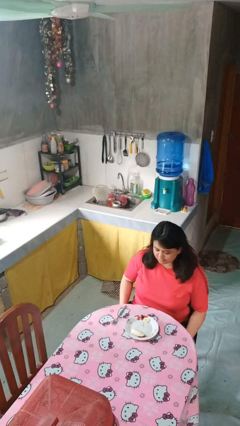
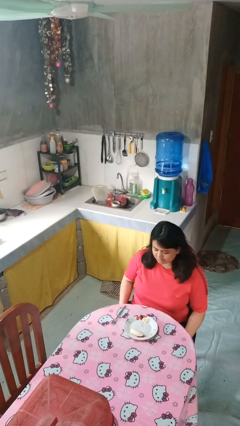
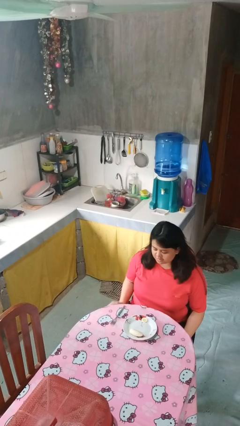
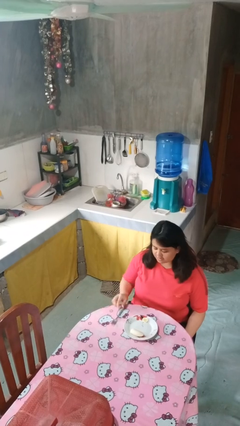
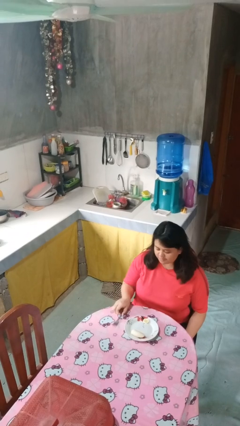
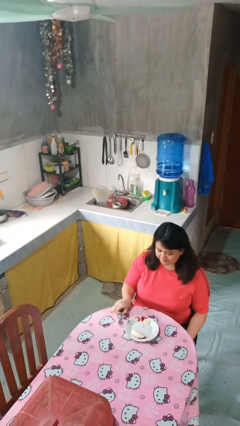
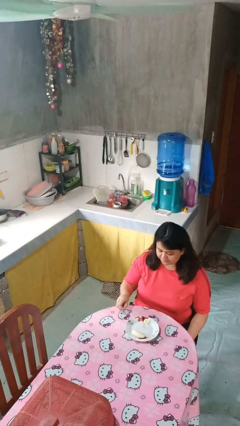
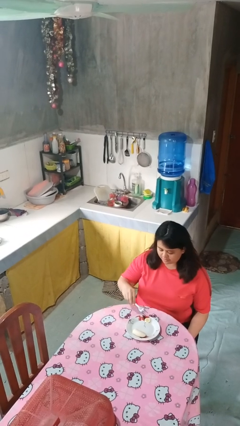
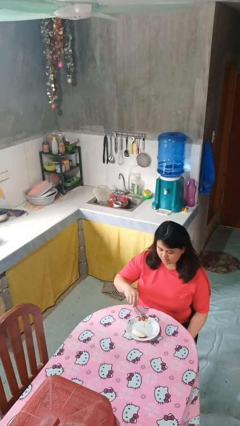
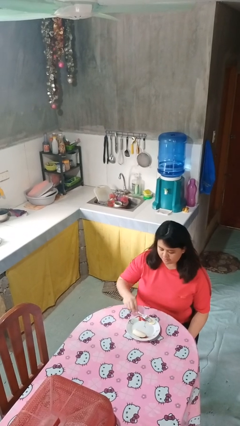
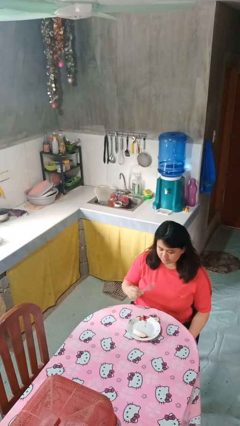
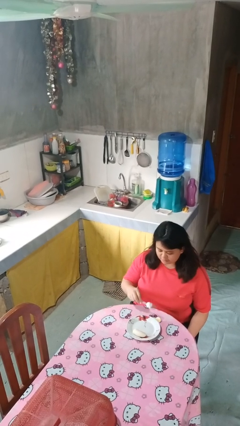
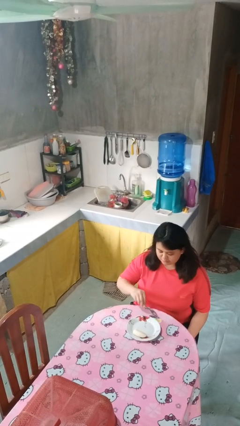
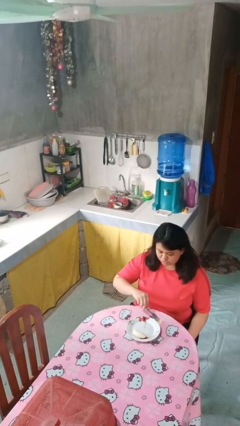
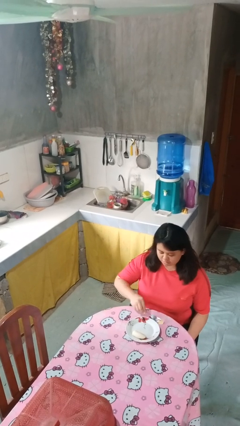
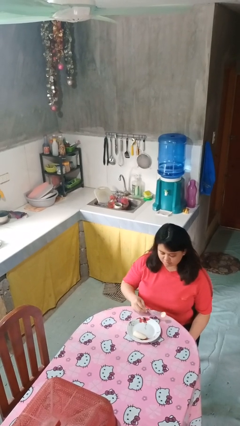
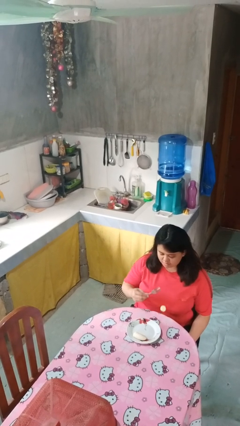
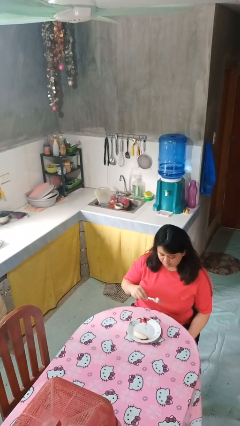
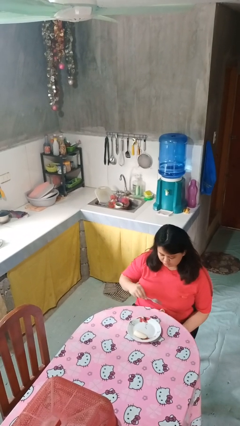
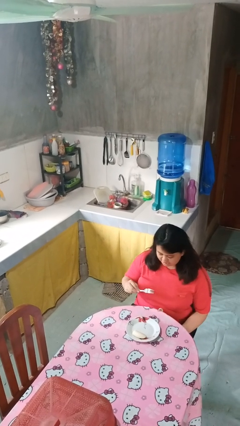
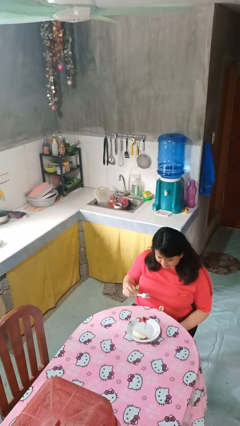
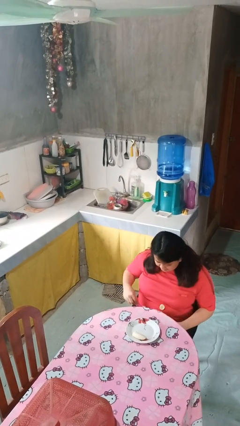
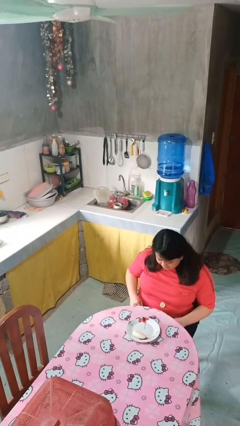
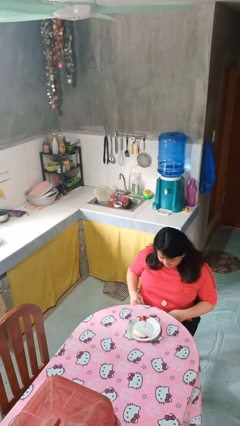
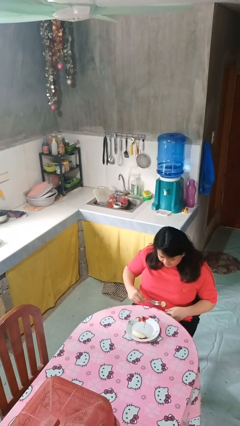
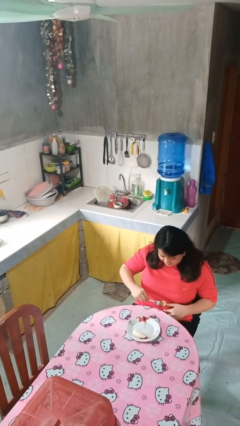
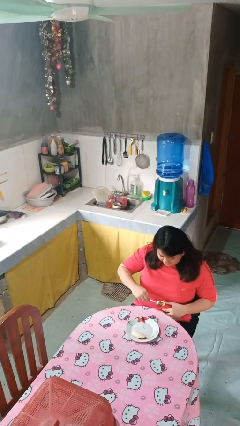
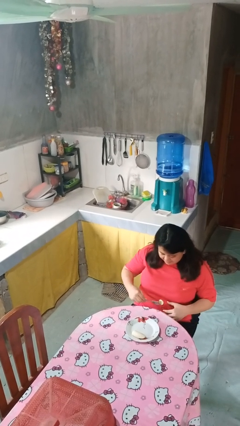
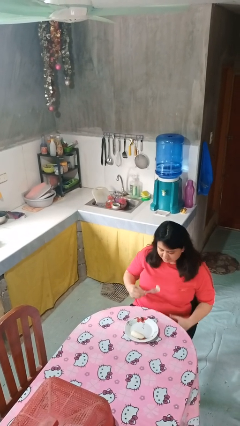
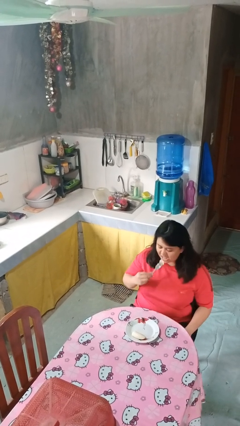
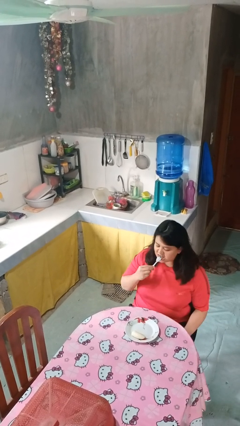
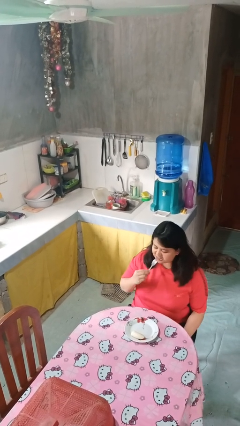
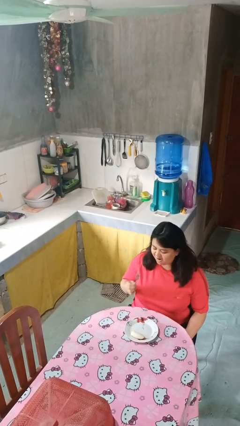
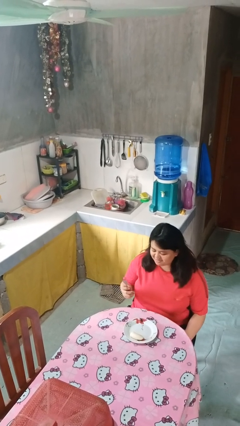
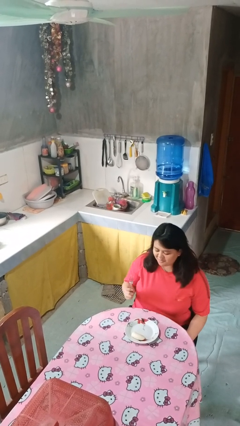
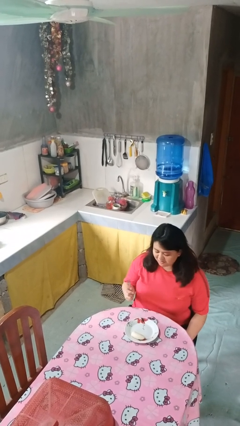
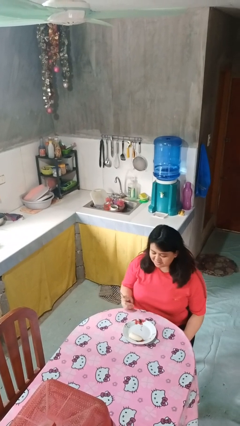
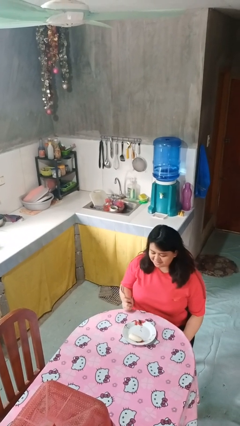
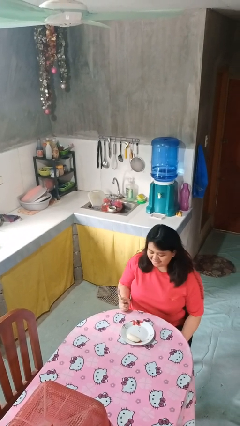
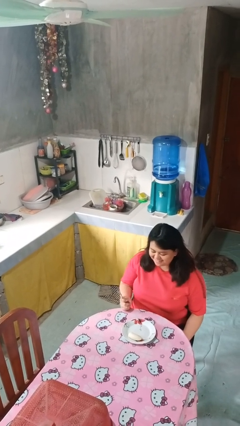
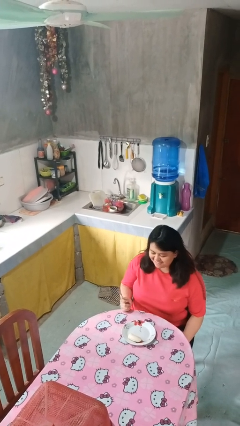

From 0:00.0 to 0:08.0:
person eats with utensil

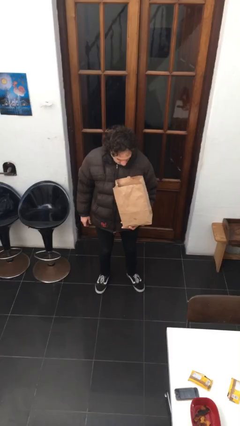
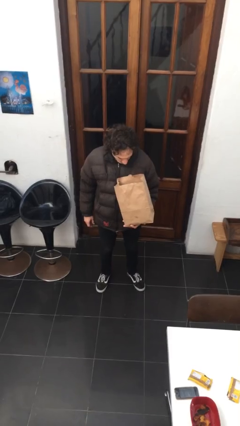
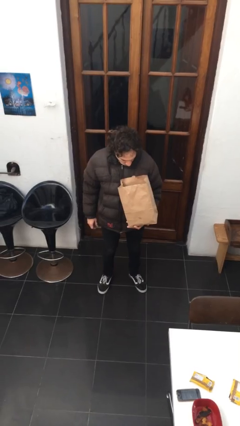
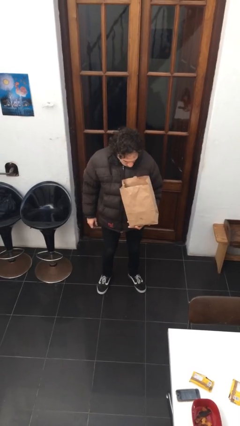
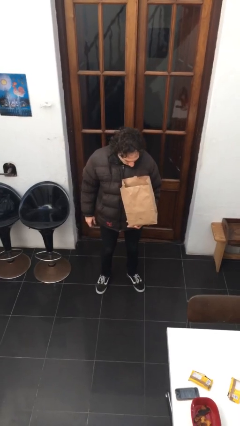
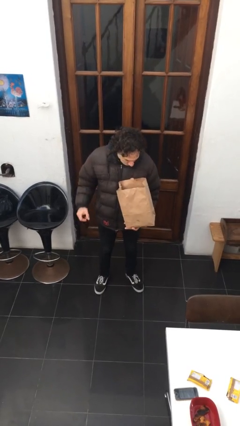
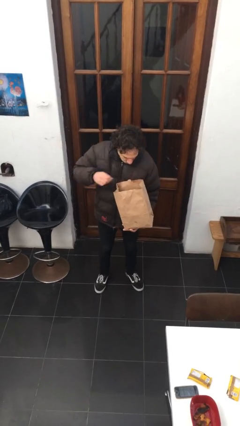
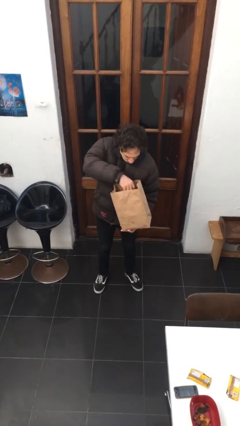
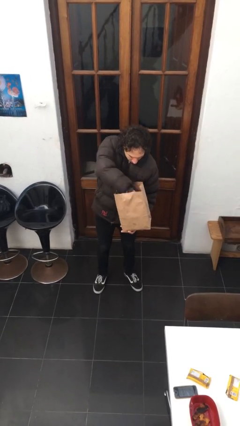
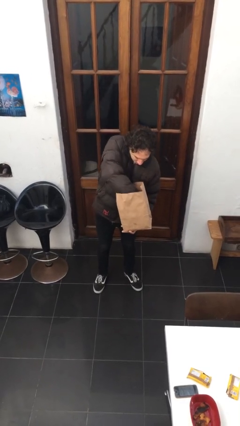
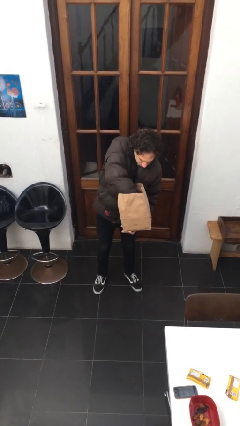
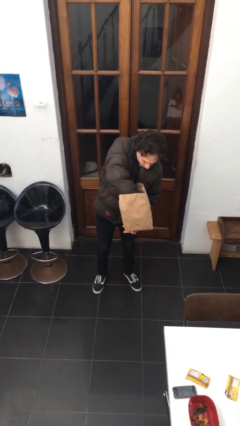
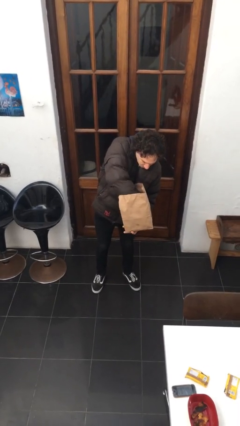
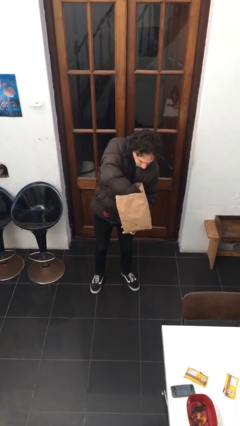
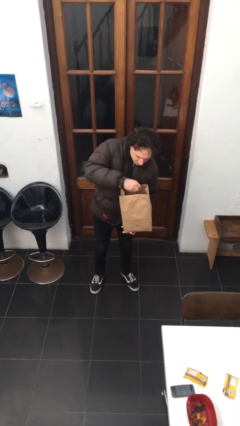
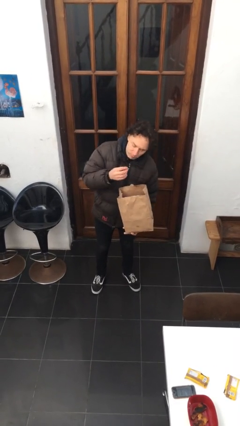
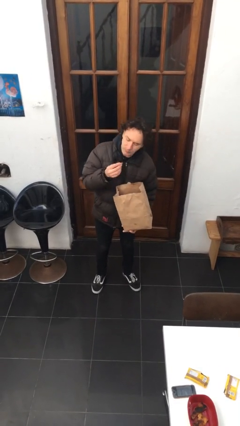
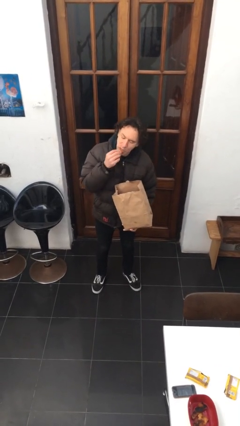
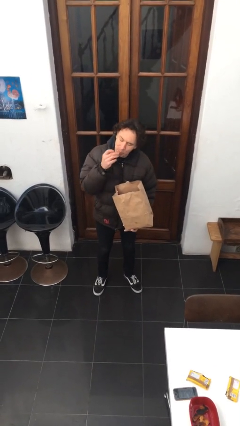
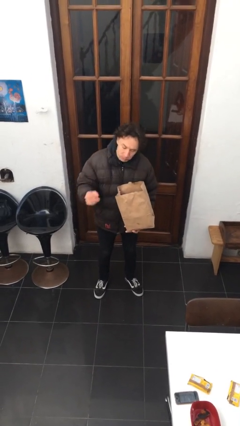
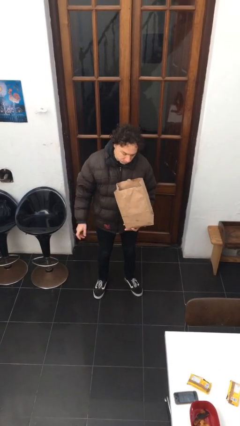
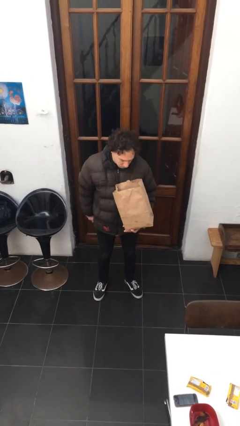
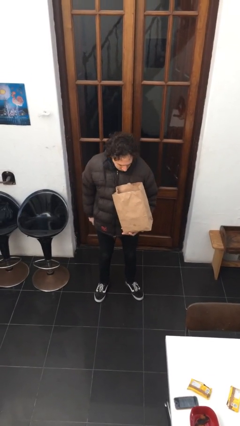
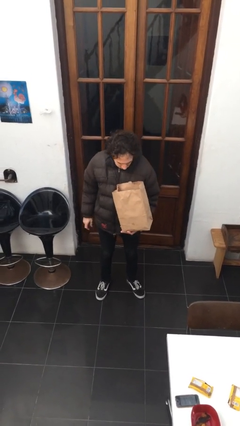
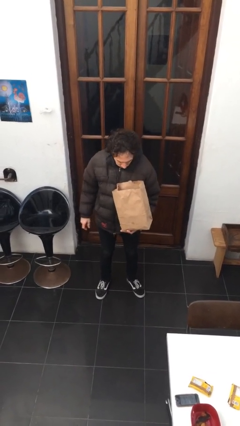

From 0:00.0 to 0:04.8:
person eats snack from bag

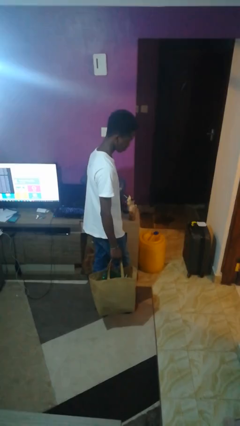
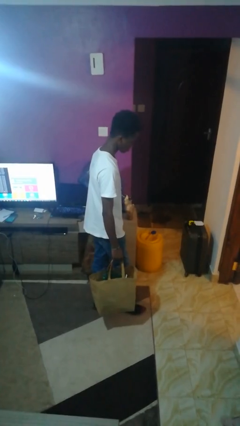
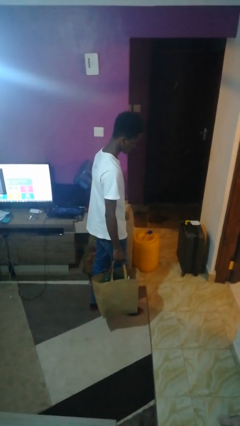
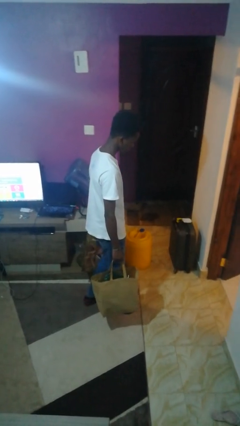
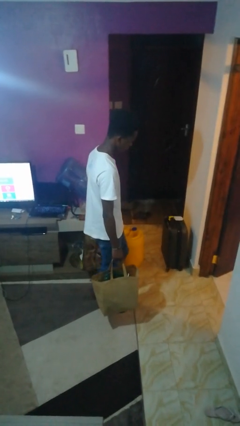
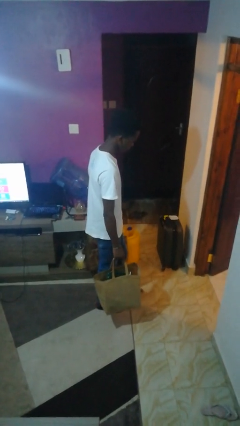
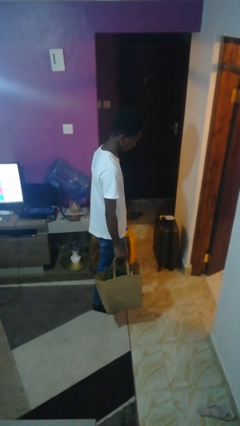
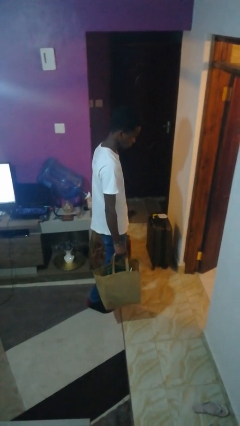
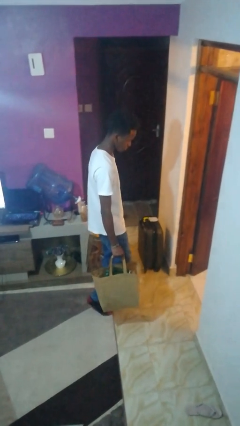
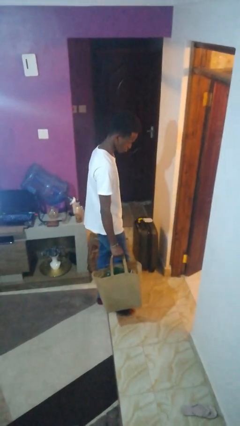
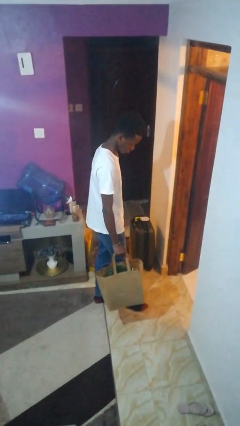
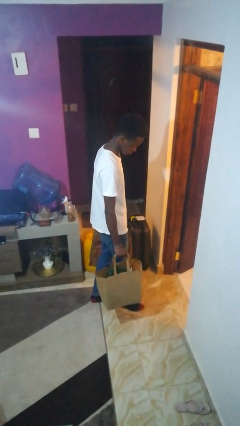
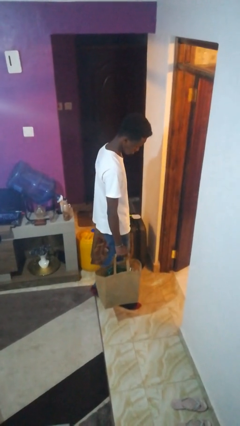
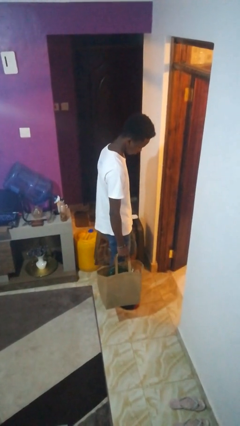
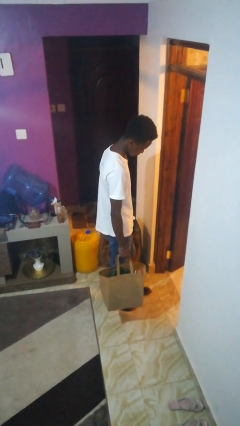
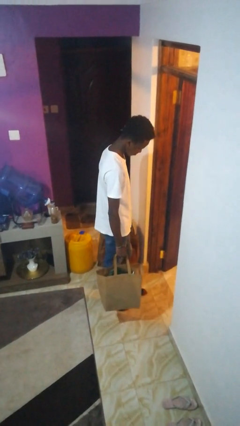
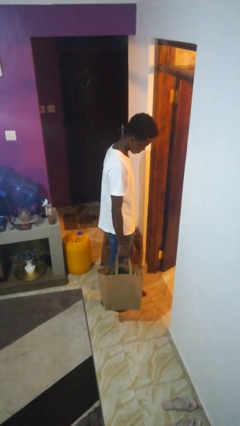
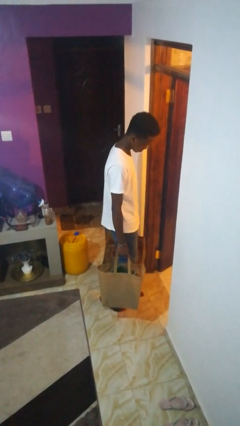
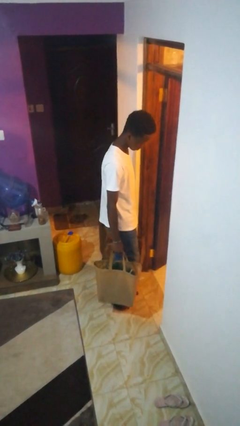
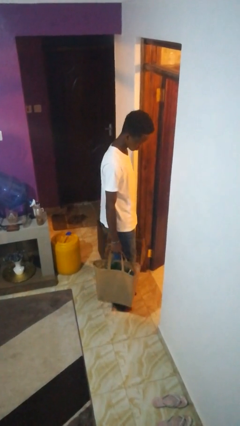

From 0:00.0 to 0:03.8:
person carries groceries

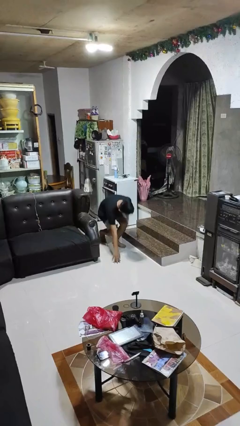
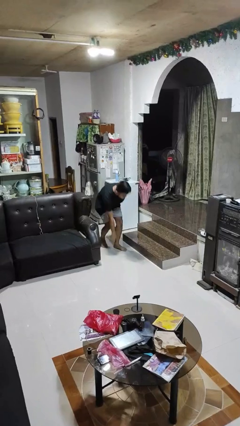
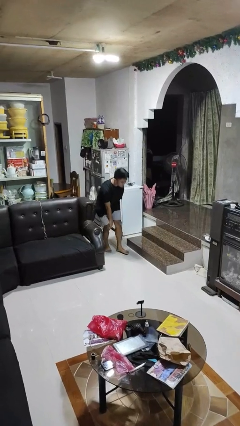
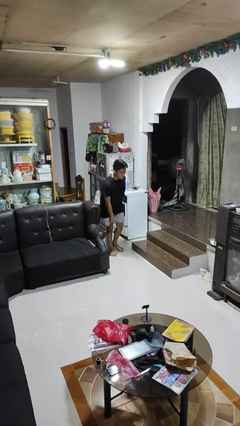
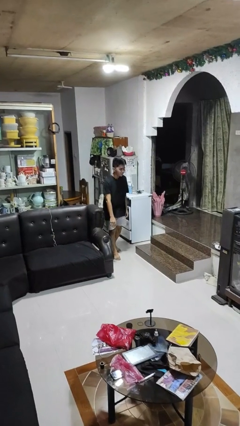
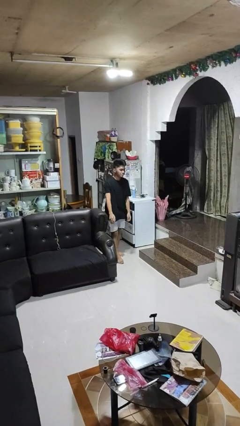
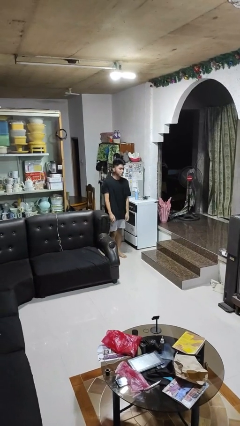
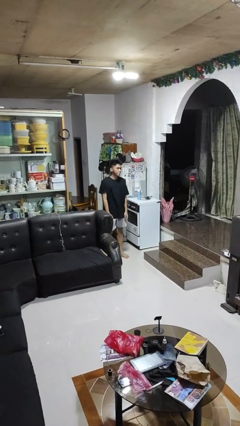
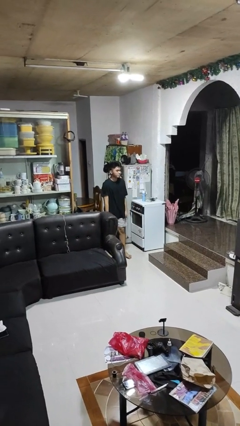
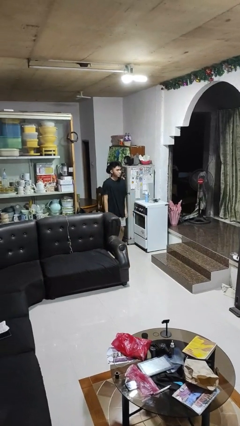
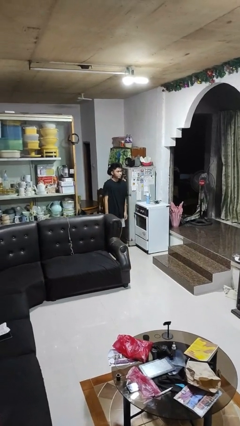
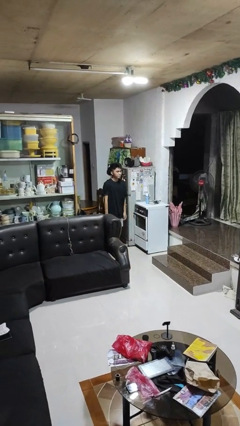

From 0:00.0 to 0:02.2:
person stands up from floor
